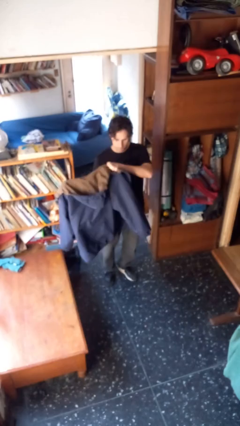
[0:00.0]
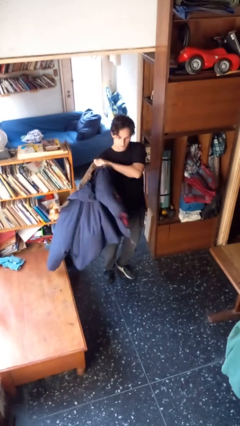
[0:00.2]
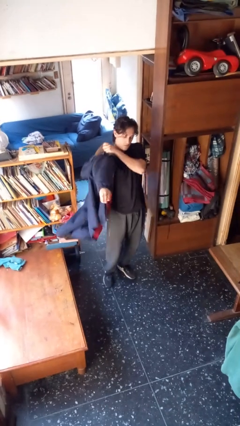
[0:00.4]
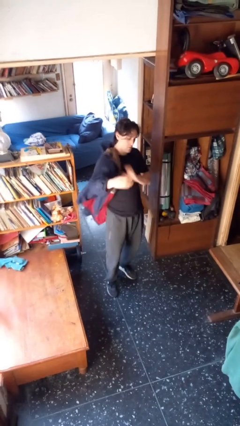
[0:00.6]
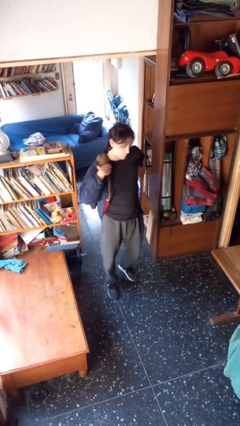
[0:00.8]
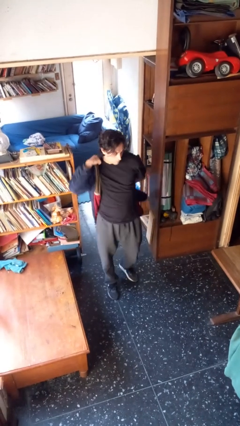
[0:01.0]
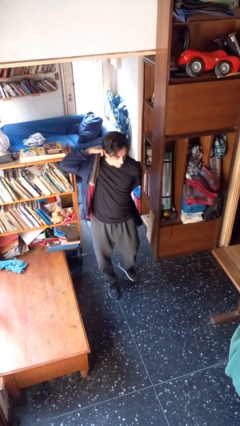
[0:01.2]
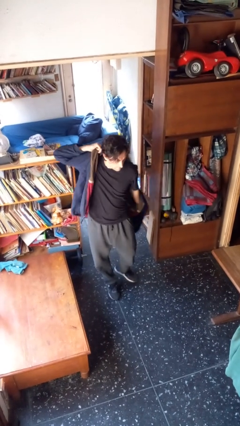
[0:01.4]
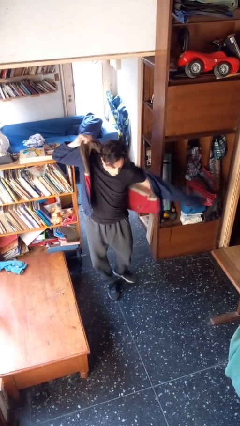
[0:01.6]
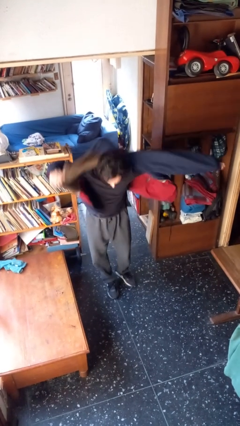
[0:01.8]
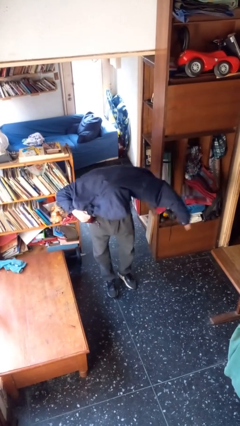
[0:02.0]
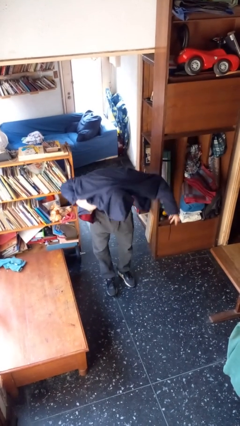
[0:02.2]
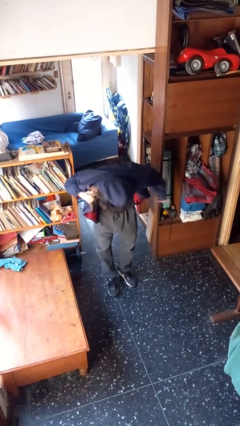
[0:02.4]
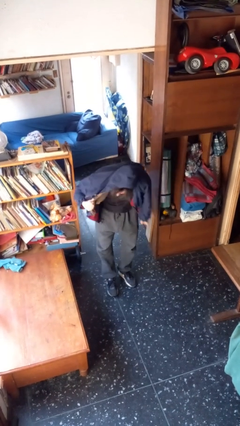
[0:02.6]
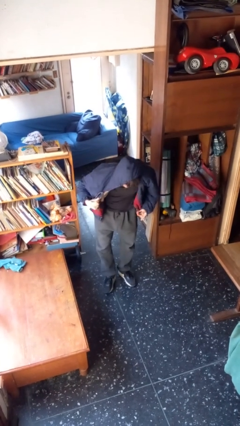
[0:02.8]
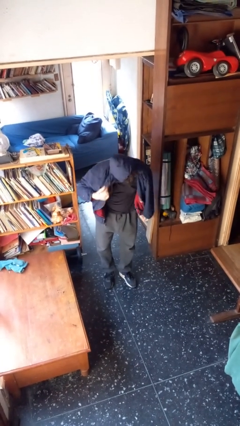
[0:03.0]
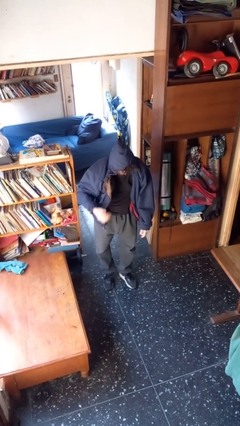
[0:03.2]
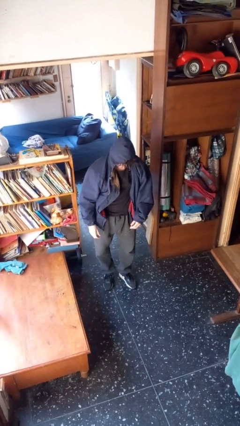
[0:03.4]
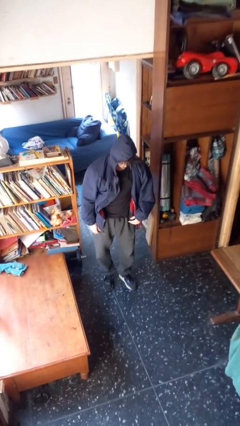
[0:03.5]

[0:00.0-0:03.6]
person puts on hoodie

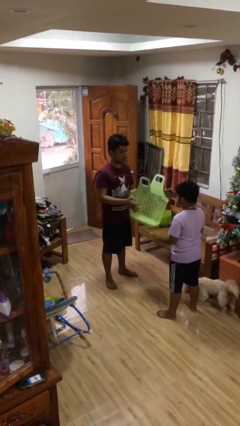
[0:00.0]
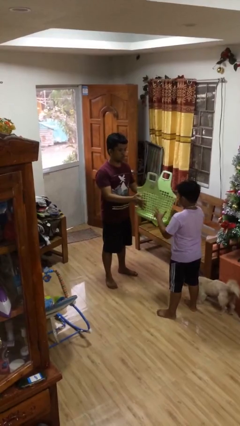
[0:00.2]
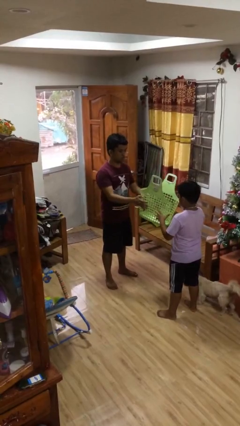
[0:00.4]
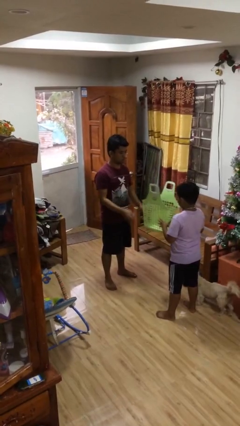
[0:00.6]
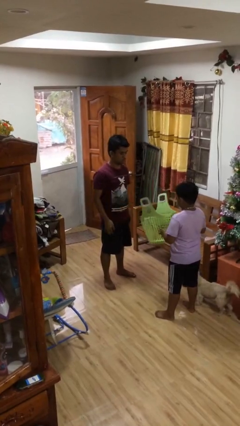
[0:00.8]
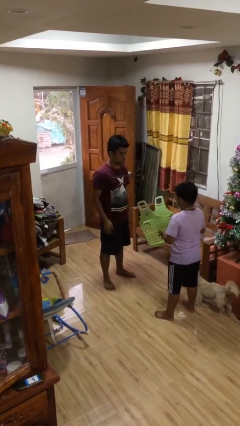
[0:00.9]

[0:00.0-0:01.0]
person transfers object to person

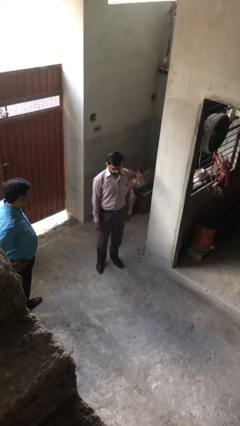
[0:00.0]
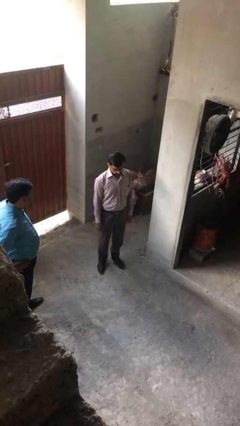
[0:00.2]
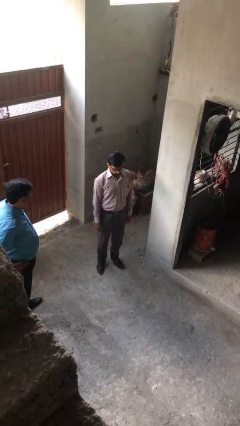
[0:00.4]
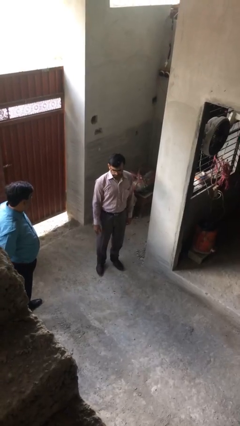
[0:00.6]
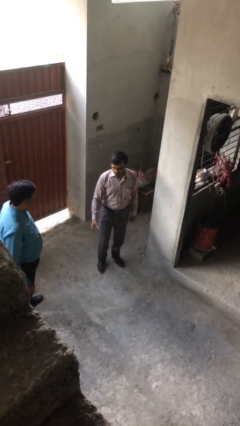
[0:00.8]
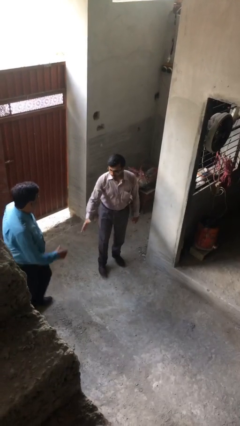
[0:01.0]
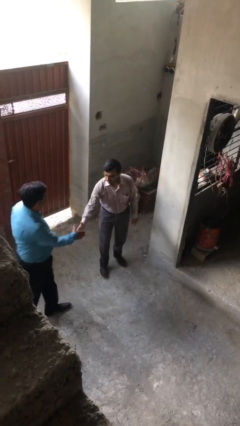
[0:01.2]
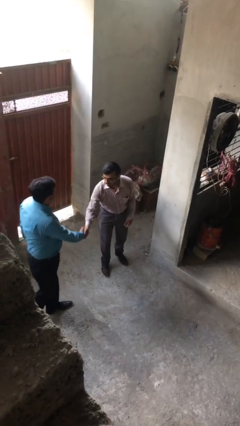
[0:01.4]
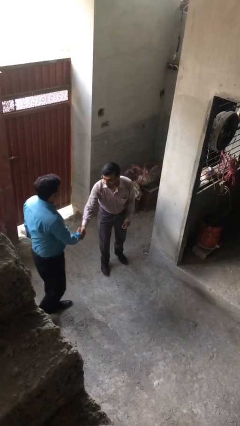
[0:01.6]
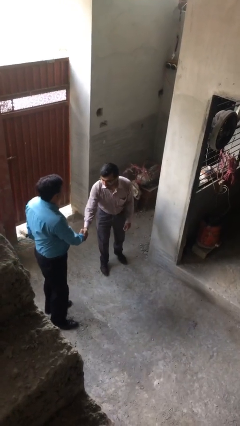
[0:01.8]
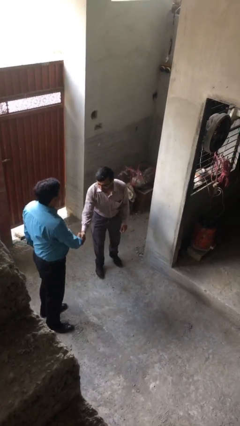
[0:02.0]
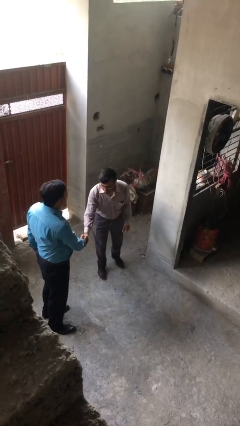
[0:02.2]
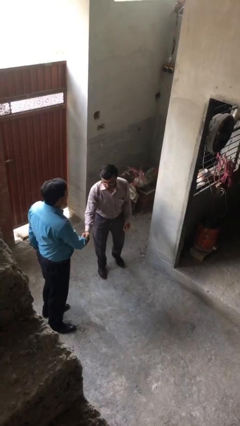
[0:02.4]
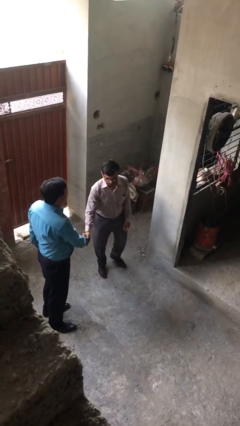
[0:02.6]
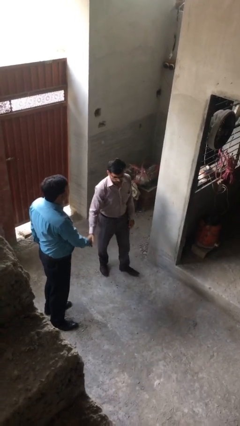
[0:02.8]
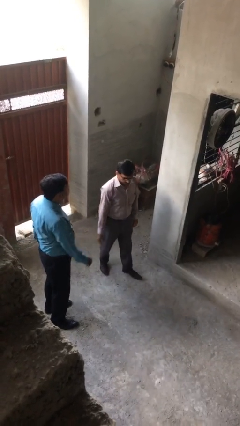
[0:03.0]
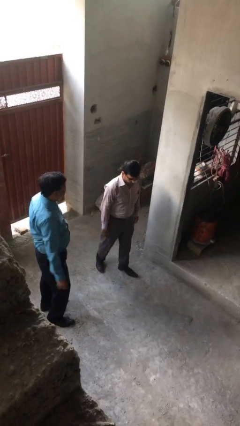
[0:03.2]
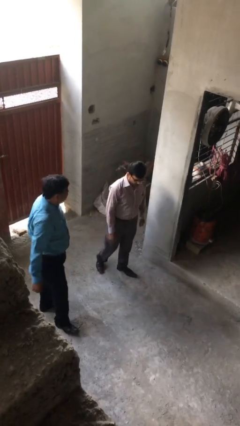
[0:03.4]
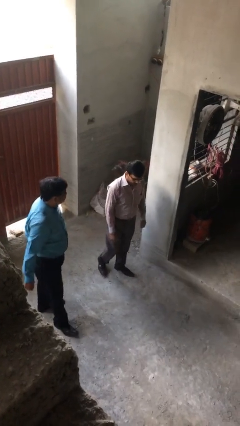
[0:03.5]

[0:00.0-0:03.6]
person shakes hand

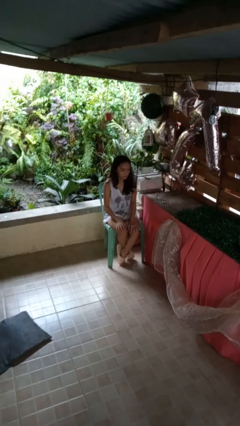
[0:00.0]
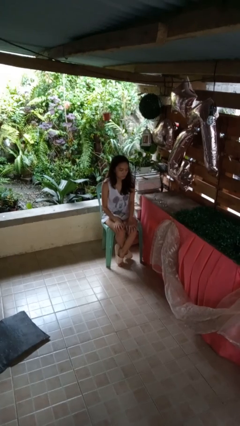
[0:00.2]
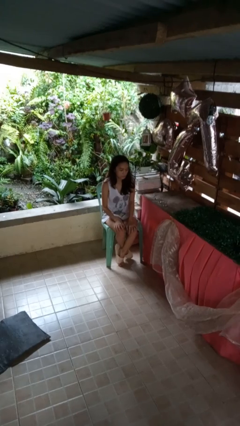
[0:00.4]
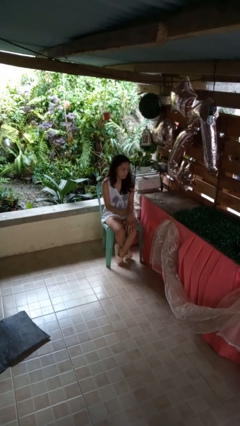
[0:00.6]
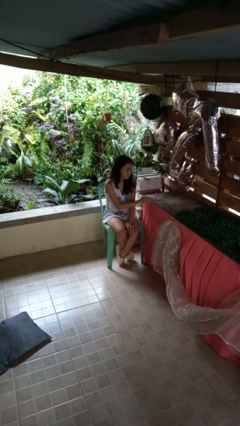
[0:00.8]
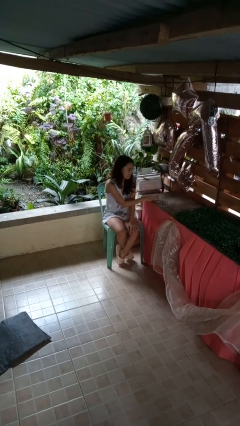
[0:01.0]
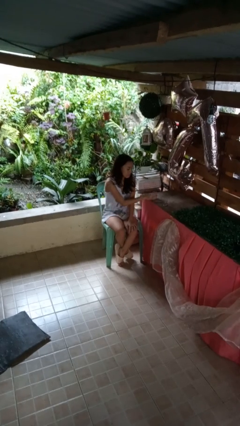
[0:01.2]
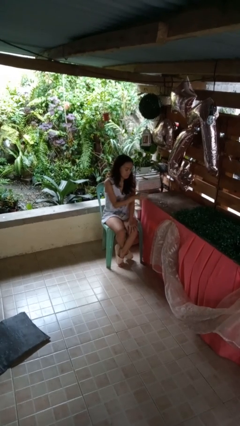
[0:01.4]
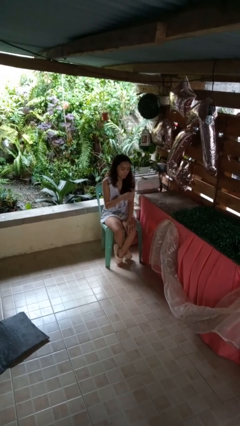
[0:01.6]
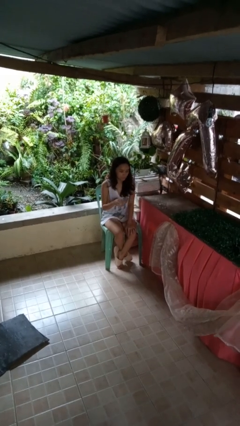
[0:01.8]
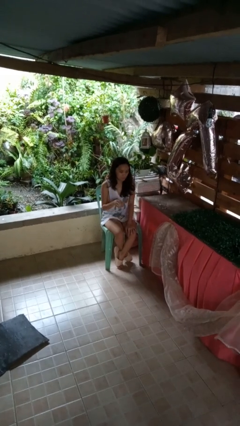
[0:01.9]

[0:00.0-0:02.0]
person picks up object from table

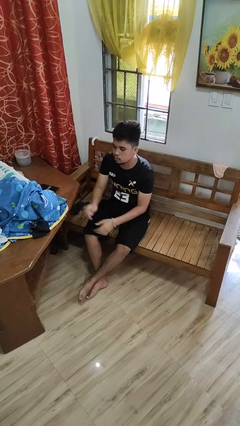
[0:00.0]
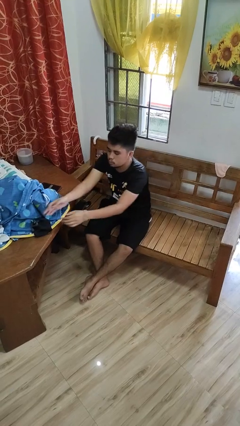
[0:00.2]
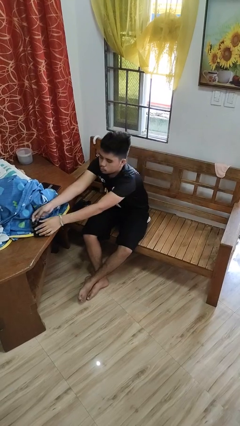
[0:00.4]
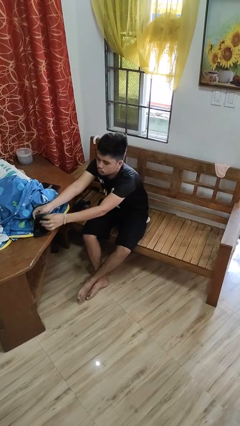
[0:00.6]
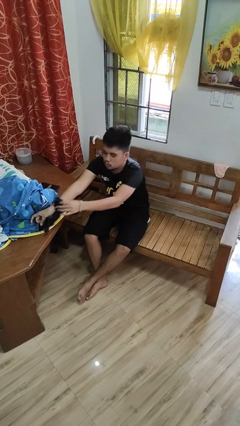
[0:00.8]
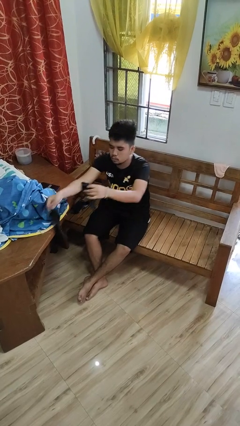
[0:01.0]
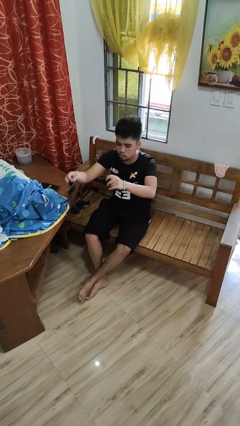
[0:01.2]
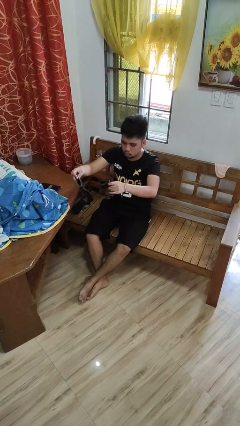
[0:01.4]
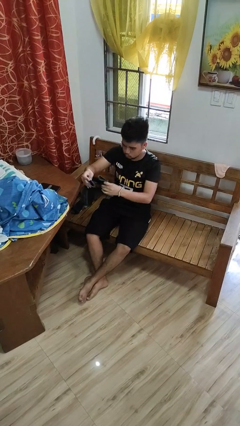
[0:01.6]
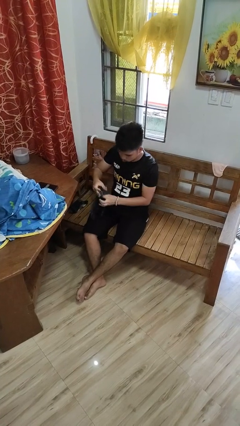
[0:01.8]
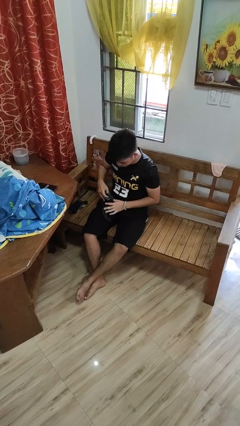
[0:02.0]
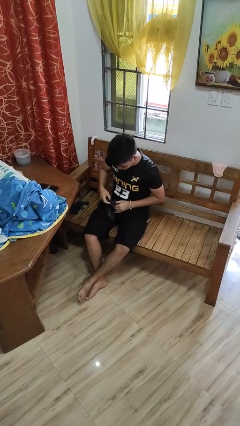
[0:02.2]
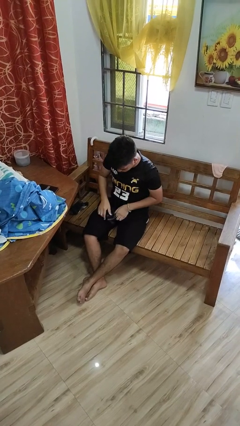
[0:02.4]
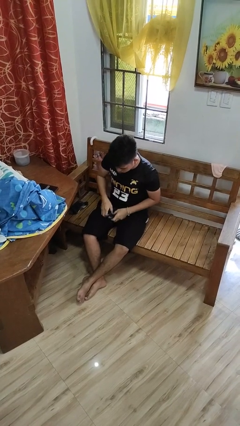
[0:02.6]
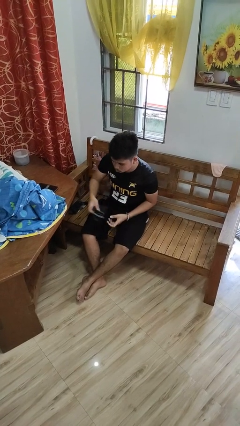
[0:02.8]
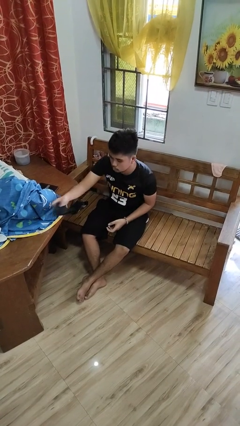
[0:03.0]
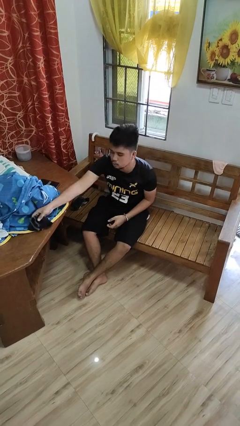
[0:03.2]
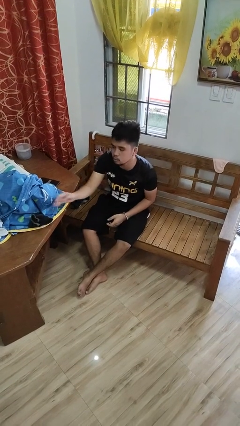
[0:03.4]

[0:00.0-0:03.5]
person folds socks

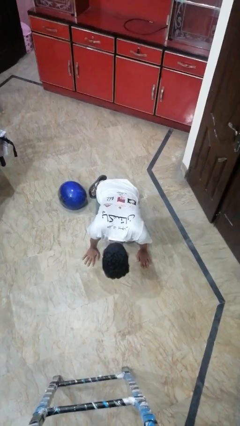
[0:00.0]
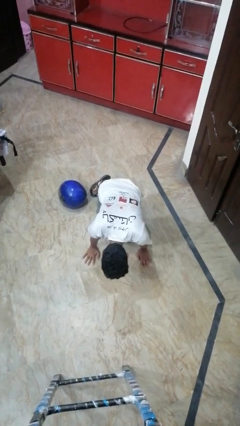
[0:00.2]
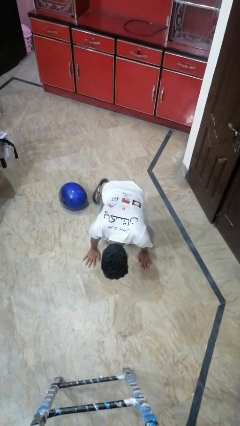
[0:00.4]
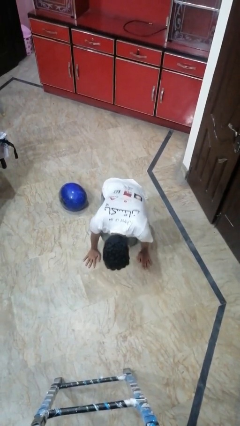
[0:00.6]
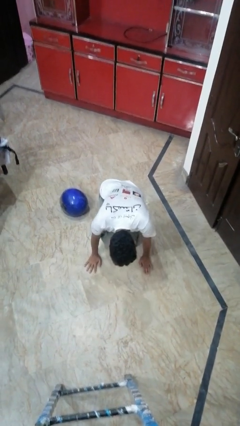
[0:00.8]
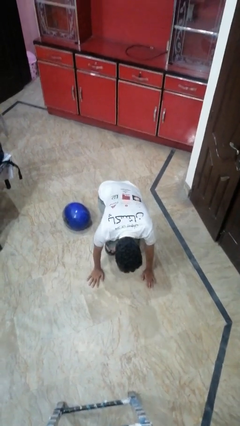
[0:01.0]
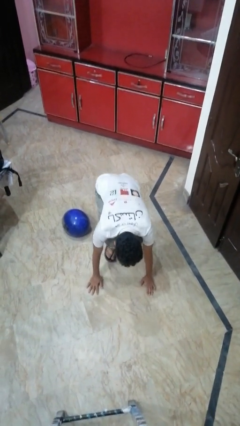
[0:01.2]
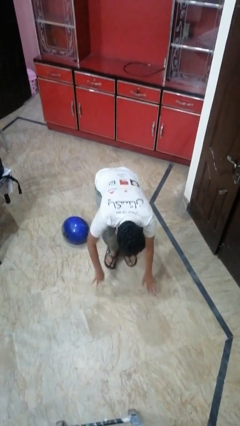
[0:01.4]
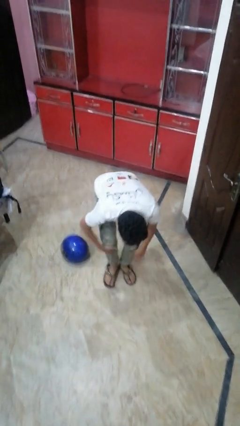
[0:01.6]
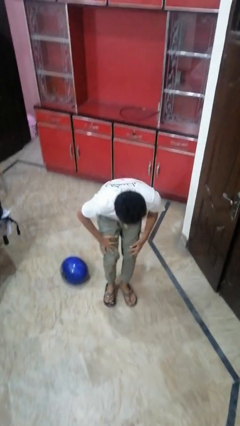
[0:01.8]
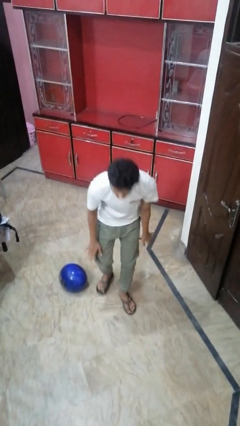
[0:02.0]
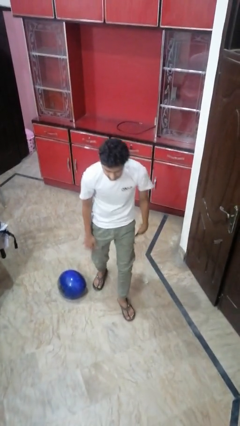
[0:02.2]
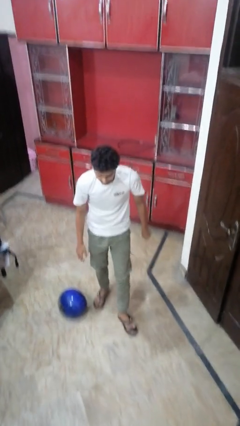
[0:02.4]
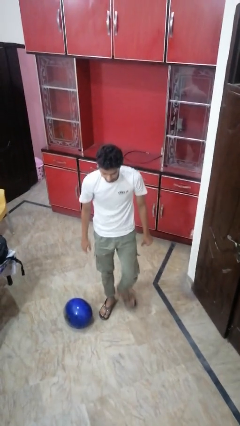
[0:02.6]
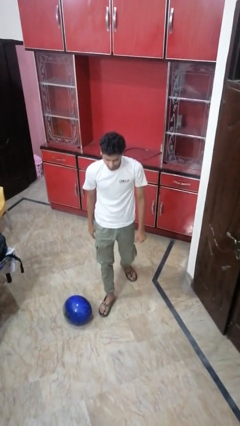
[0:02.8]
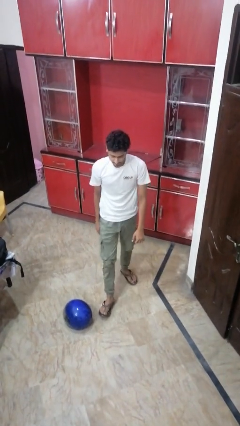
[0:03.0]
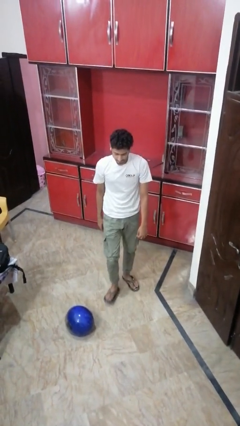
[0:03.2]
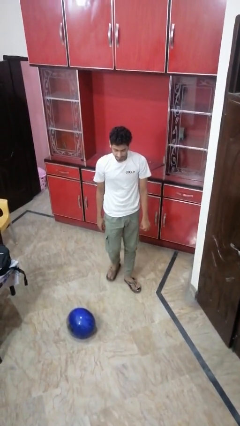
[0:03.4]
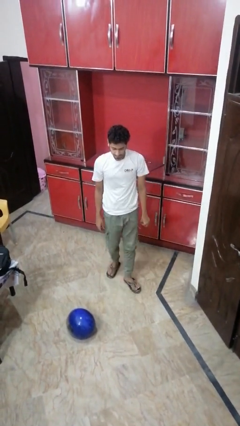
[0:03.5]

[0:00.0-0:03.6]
person stands up from floor

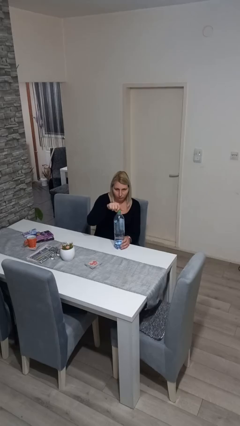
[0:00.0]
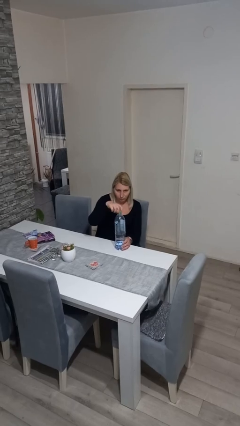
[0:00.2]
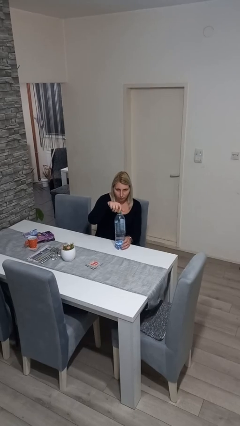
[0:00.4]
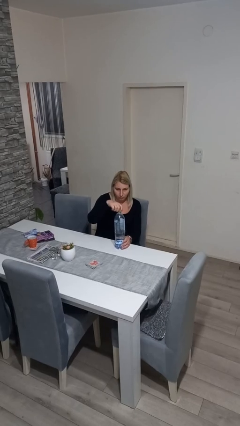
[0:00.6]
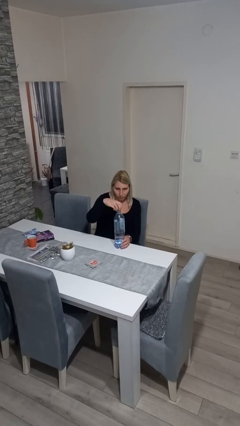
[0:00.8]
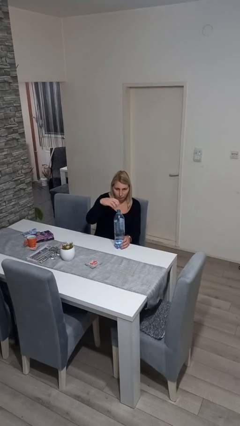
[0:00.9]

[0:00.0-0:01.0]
person unscrews lid from bottle
